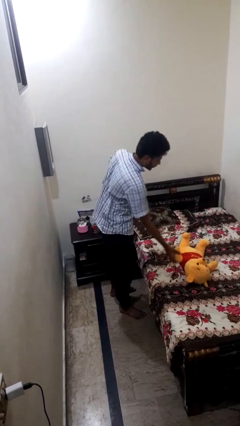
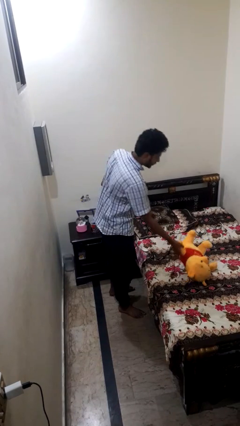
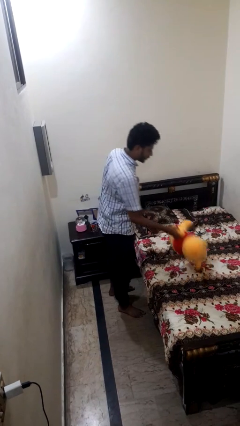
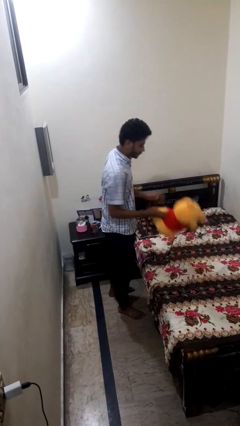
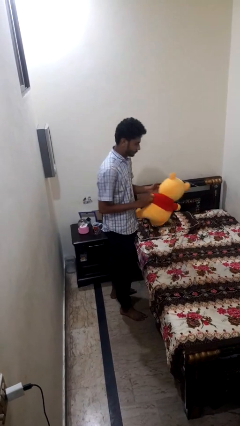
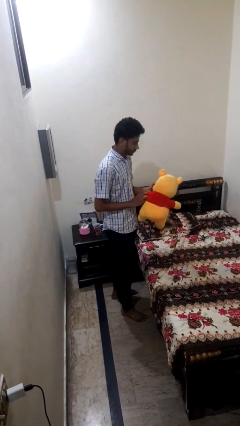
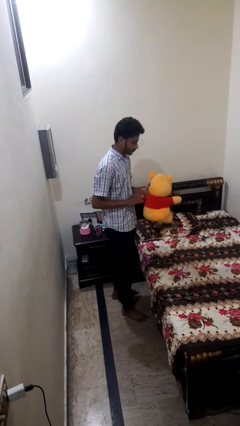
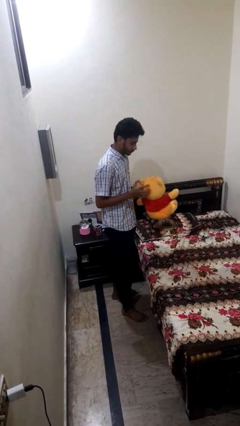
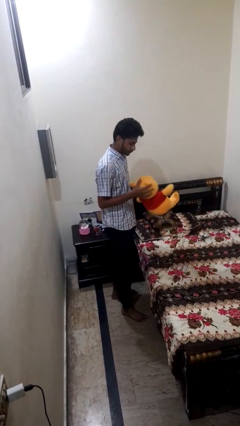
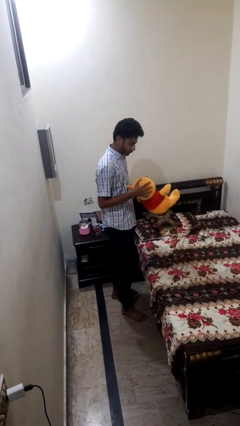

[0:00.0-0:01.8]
person picks up object from bed

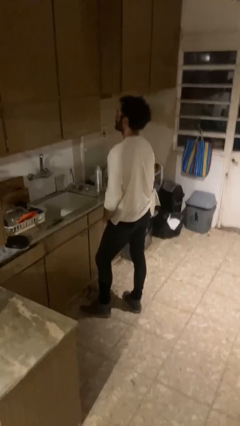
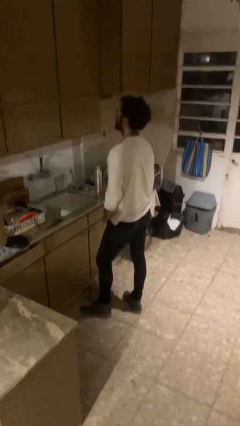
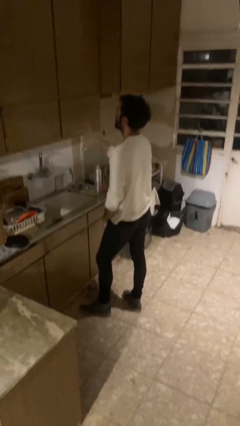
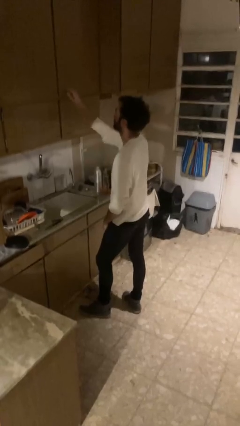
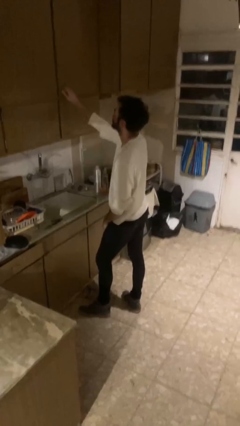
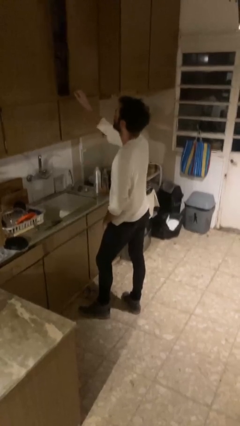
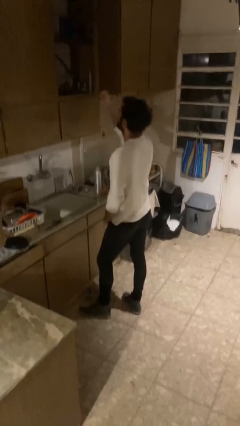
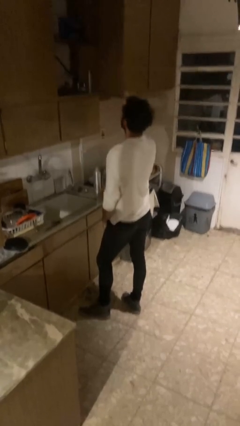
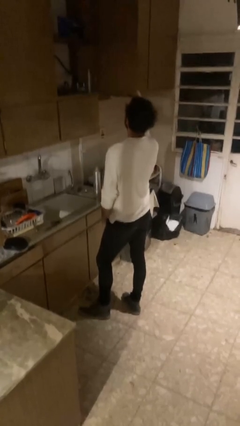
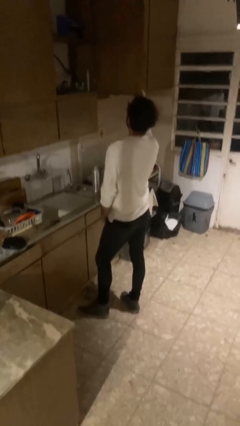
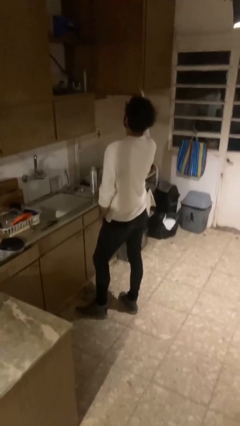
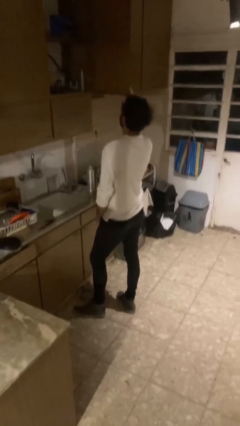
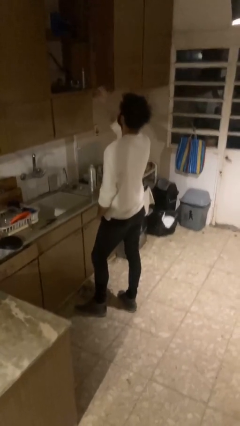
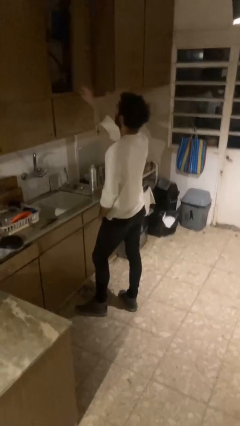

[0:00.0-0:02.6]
person closes cabinet

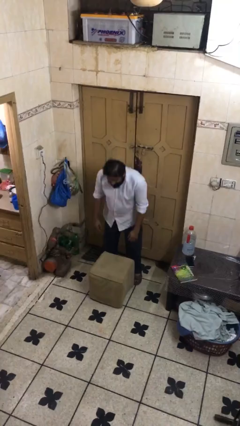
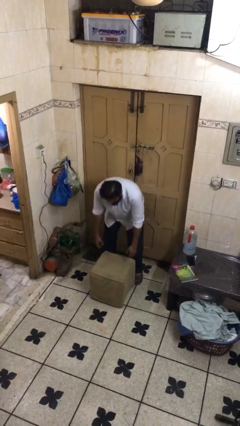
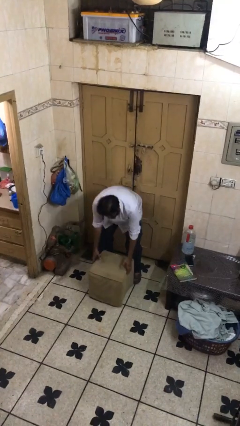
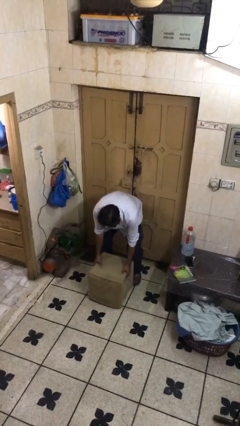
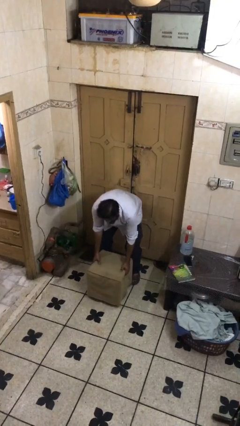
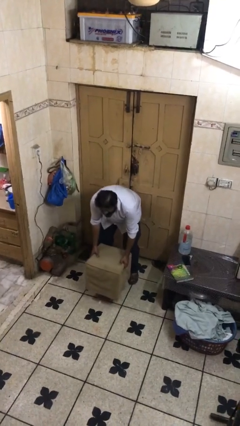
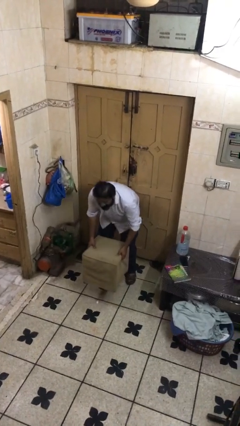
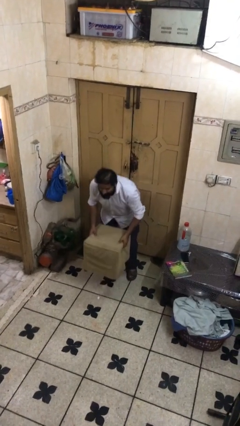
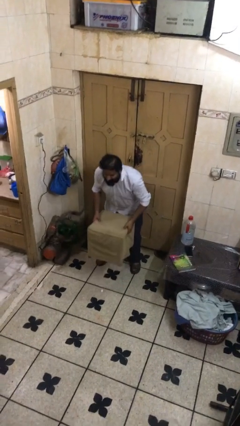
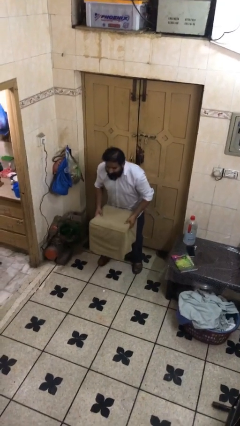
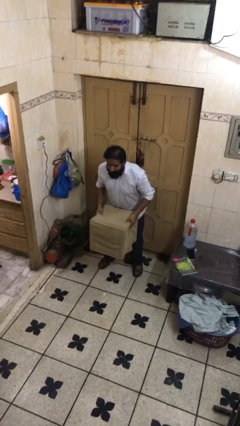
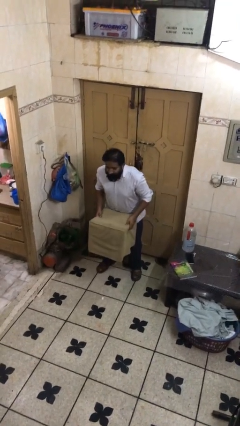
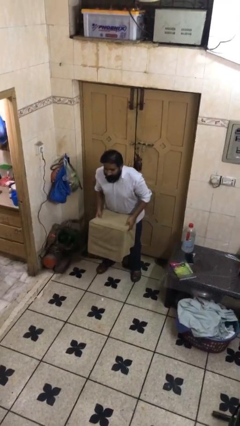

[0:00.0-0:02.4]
person picks up object from floor

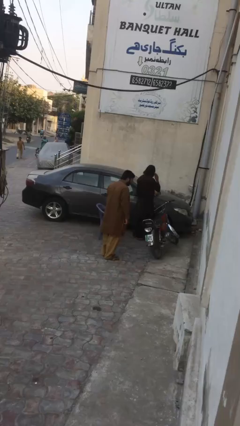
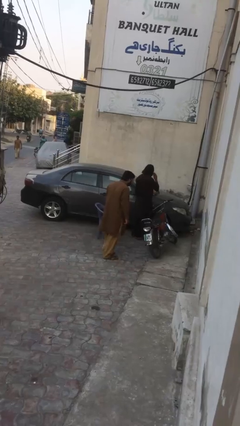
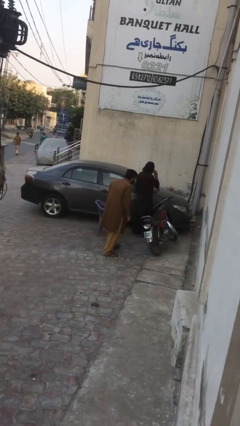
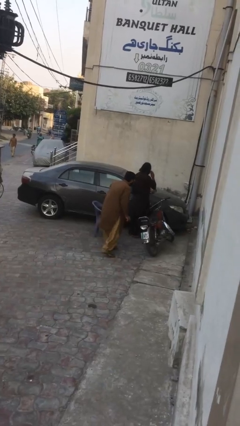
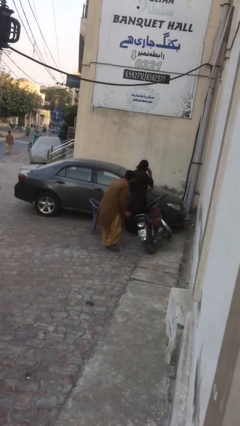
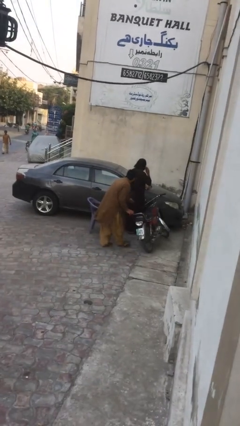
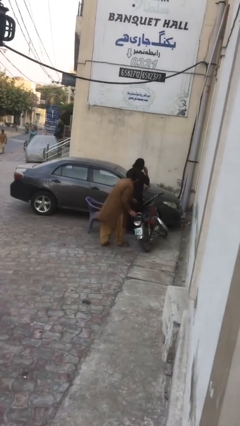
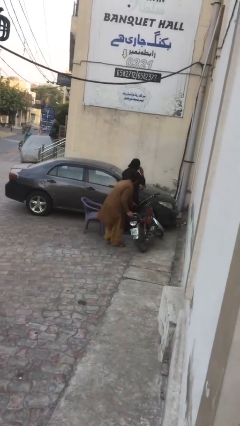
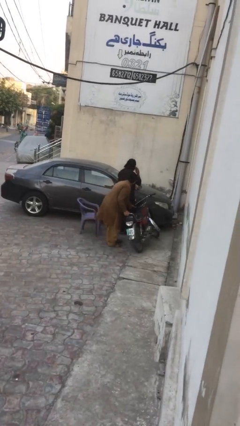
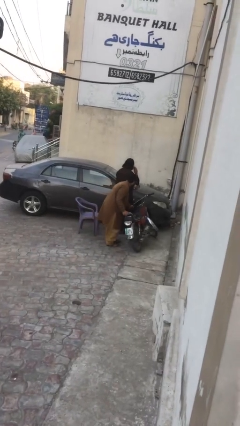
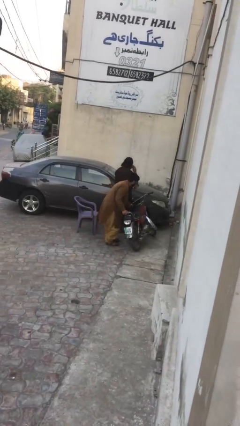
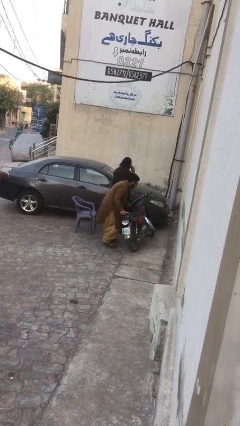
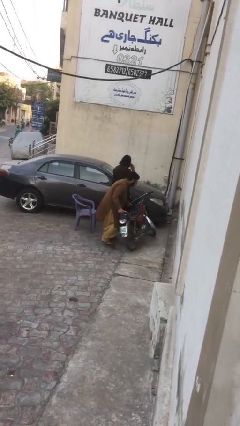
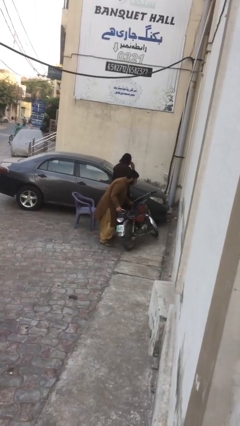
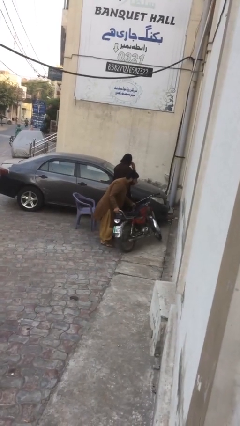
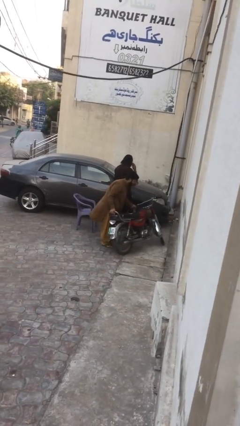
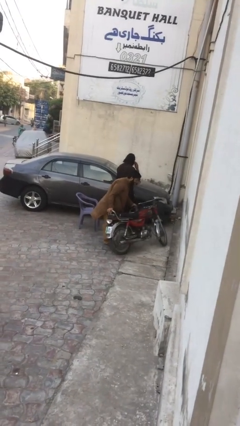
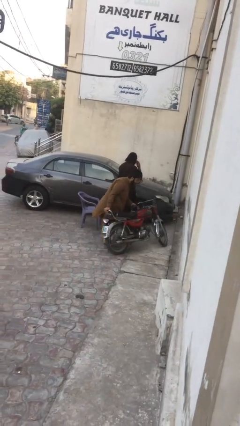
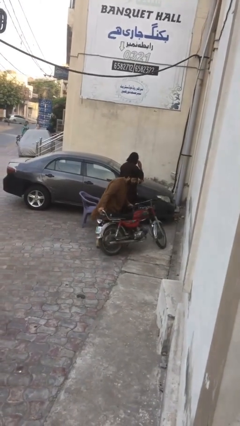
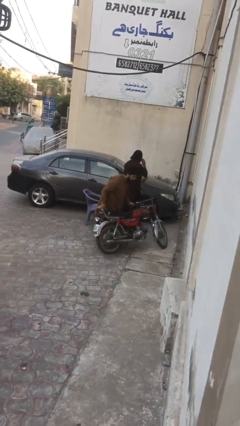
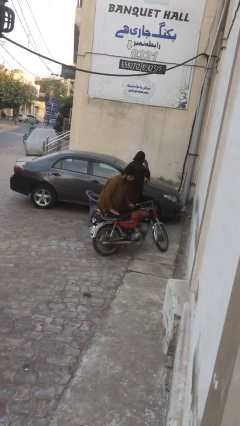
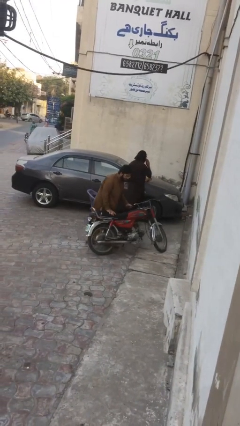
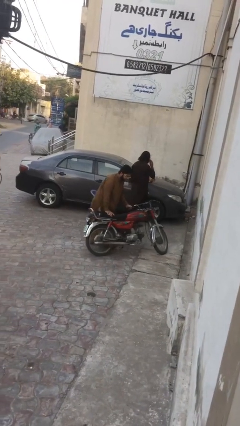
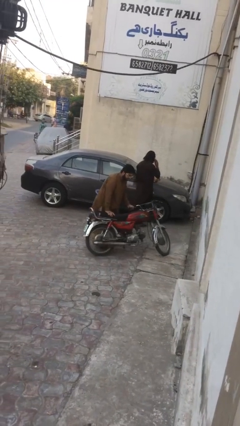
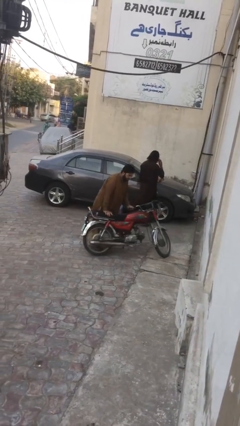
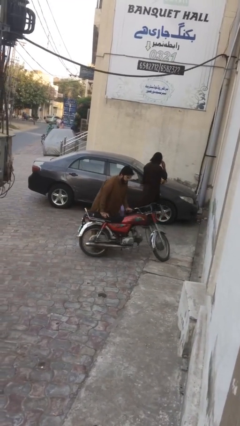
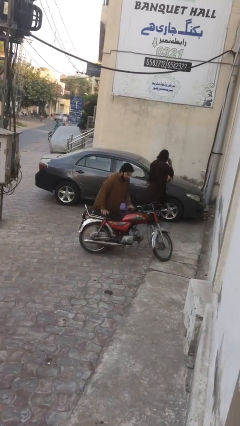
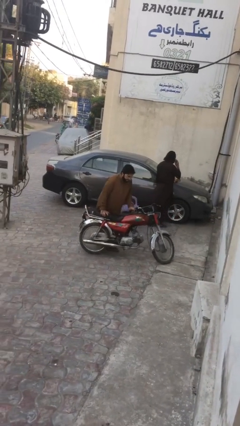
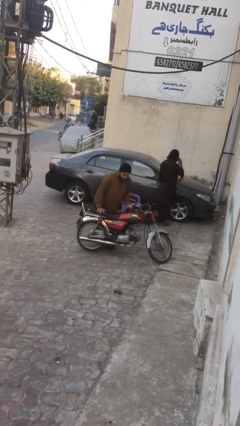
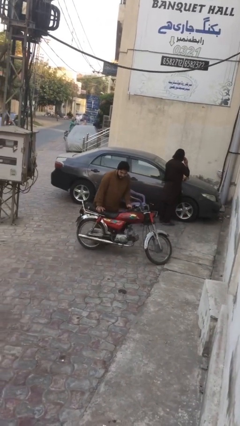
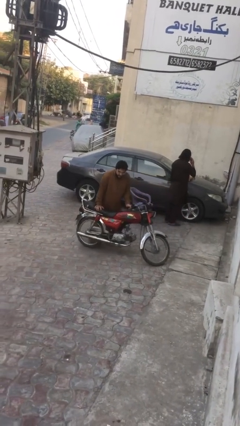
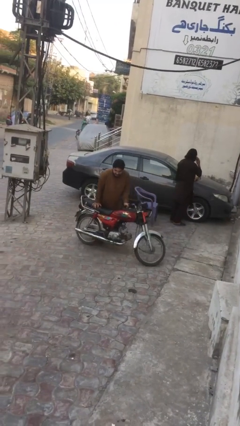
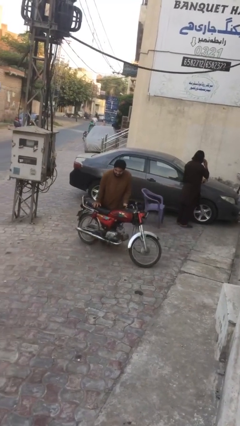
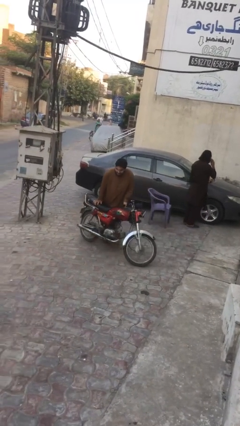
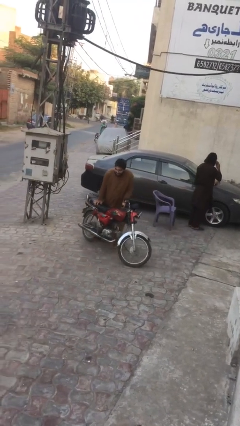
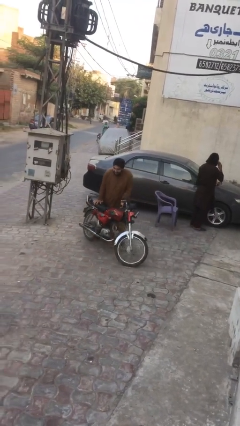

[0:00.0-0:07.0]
person steals object from person

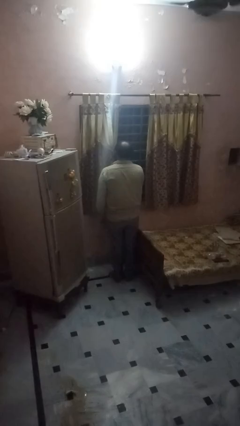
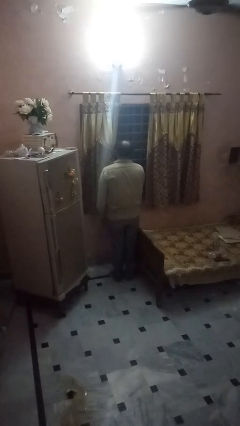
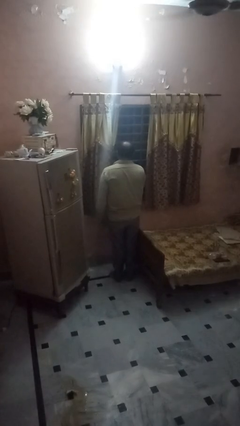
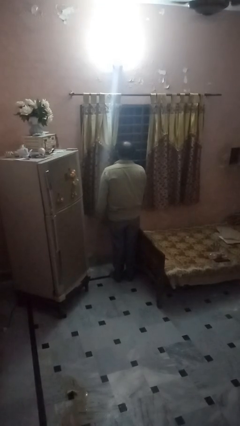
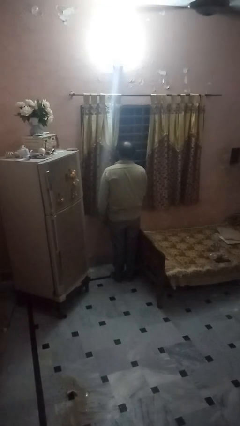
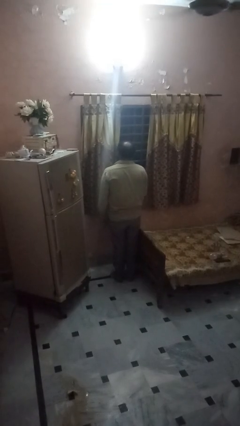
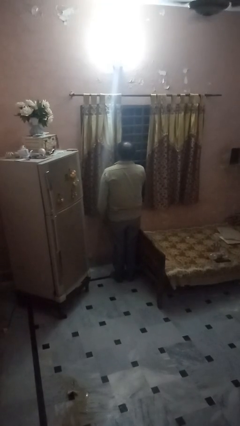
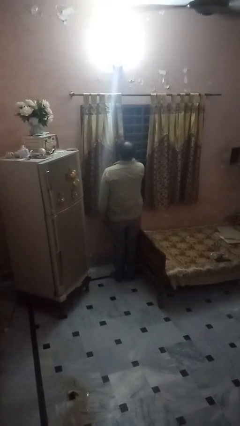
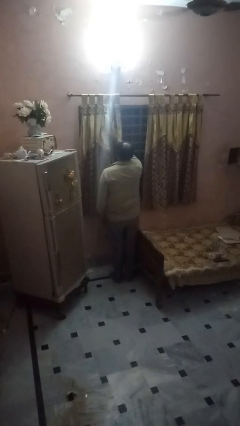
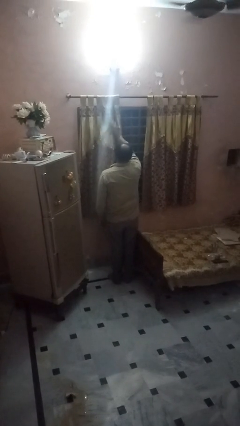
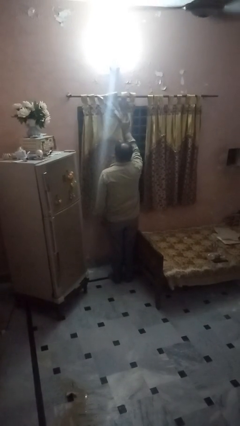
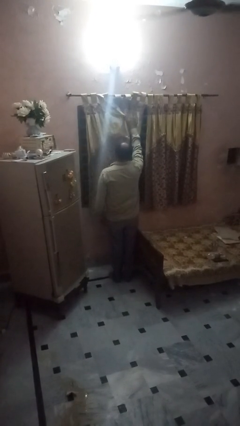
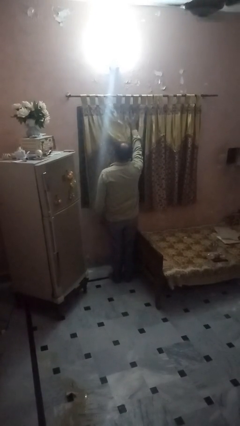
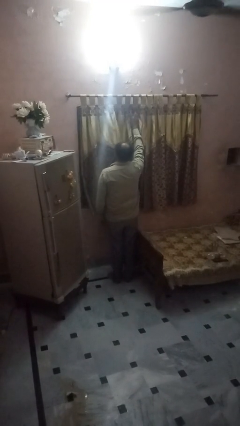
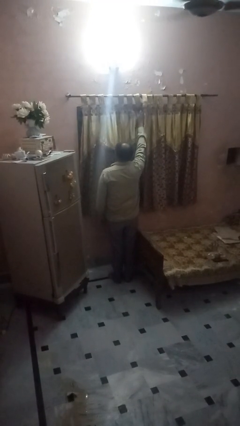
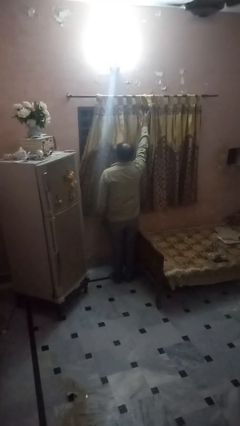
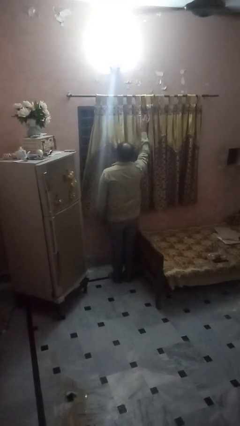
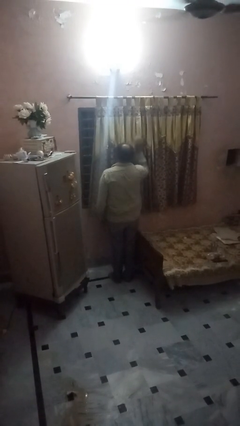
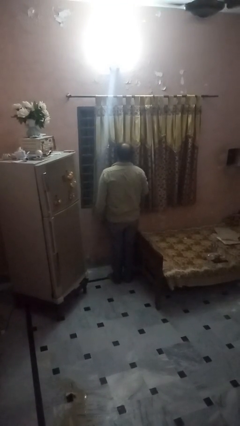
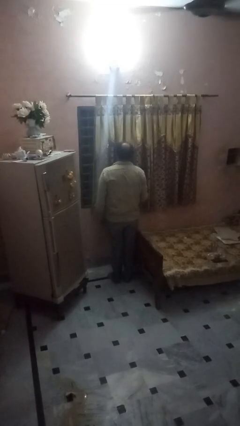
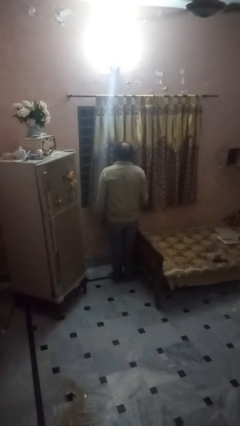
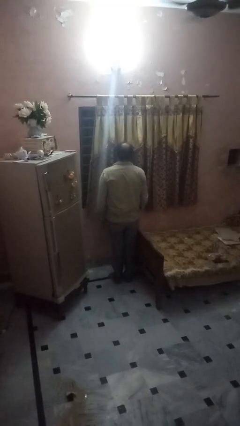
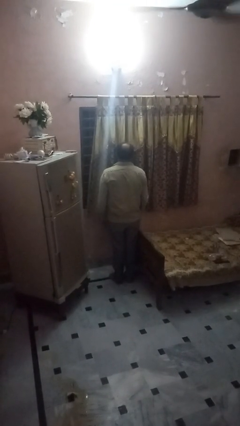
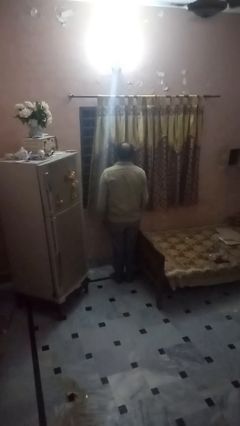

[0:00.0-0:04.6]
person closes curtains
